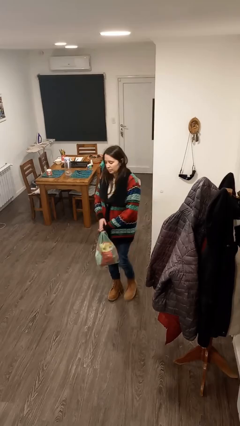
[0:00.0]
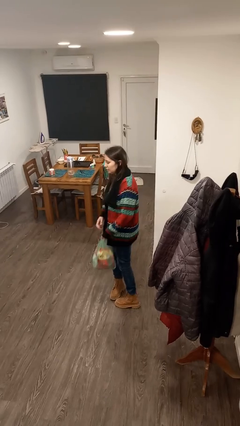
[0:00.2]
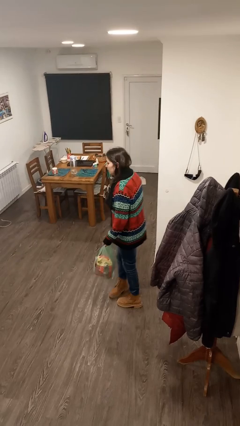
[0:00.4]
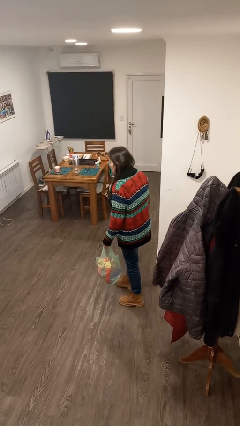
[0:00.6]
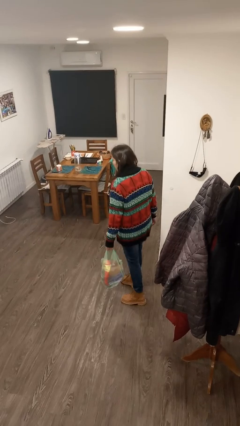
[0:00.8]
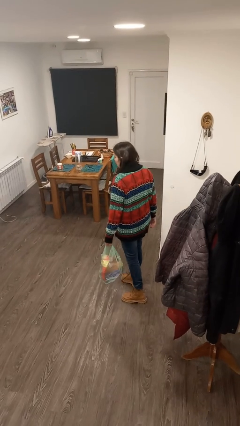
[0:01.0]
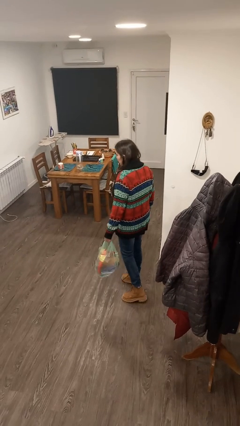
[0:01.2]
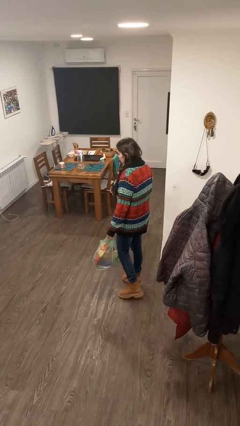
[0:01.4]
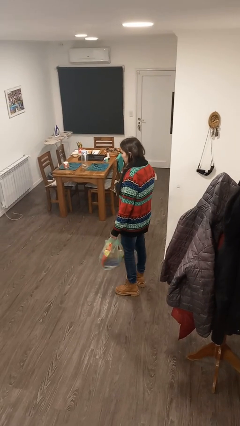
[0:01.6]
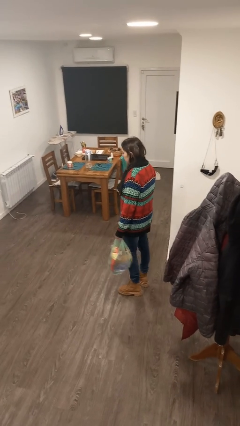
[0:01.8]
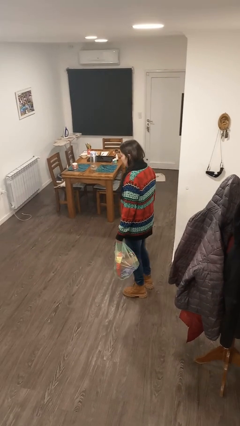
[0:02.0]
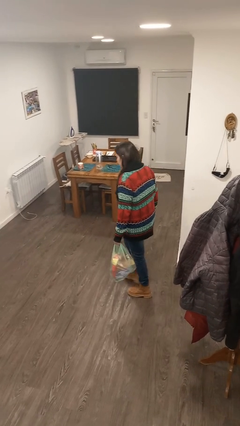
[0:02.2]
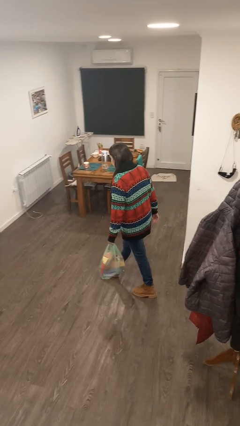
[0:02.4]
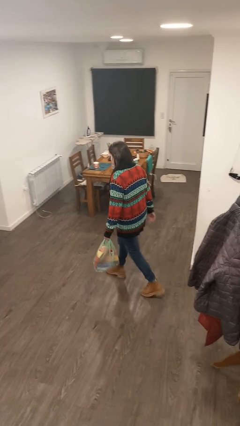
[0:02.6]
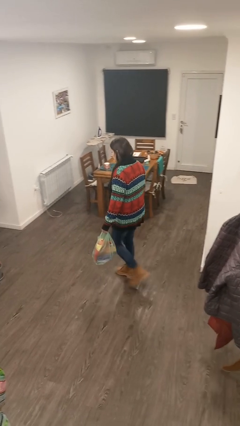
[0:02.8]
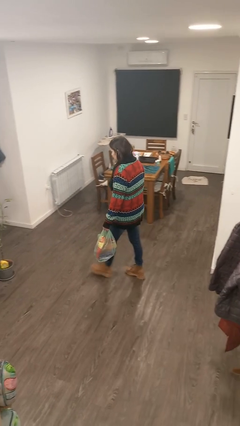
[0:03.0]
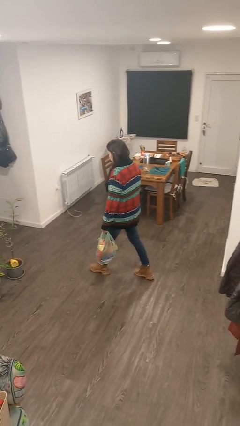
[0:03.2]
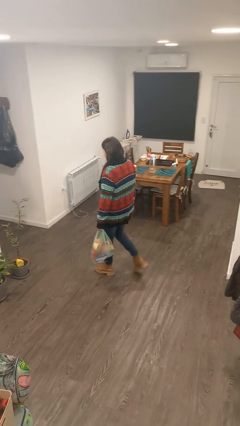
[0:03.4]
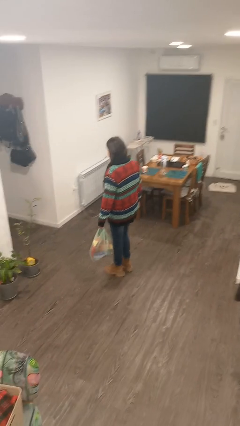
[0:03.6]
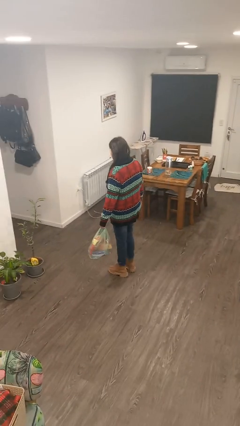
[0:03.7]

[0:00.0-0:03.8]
person carries groceries

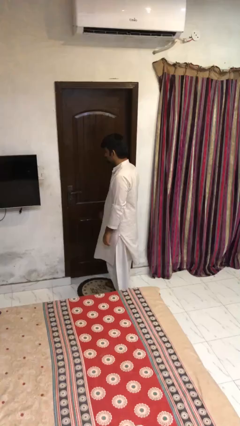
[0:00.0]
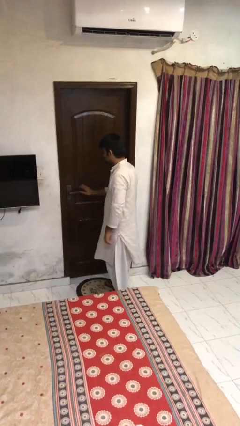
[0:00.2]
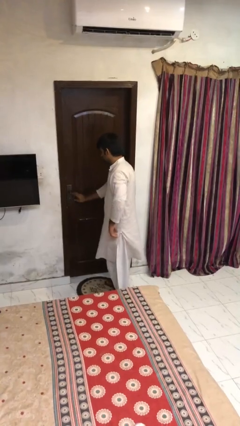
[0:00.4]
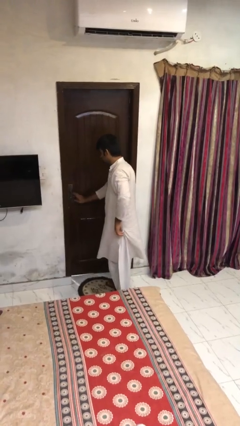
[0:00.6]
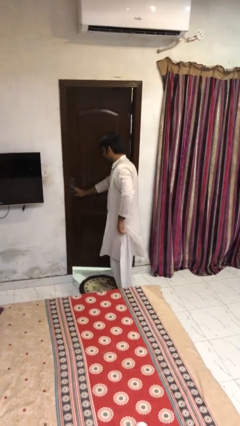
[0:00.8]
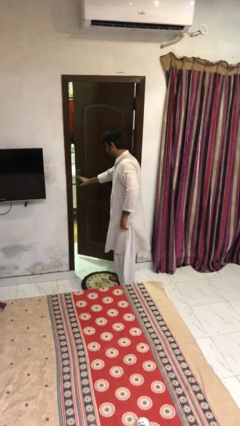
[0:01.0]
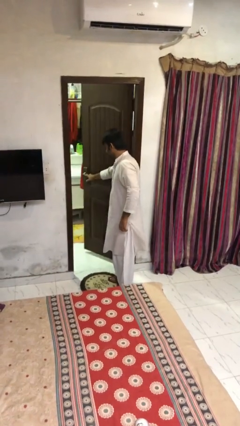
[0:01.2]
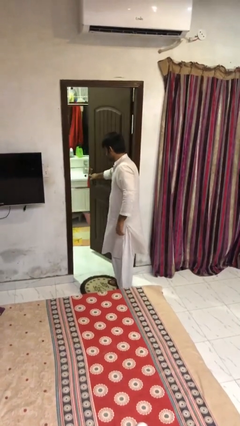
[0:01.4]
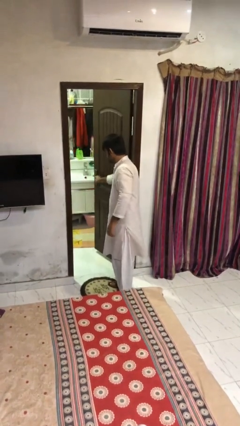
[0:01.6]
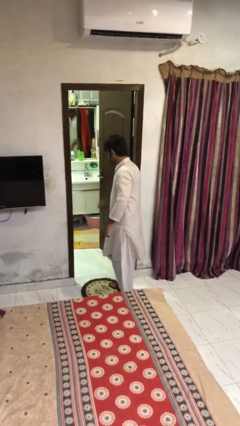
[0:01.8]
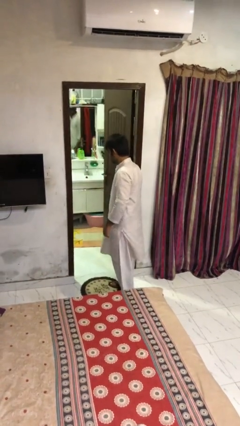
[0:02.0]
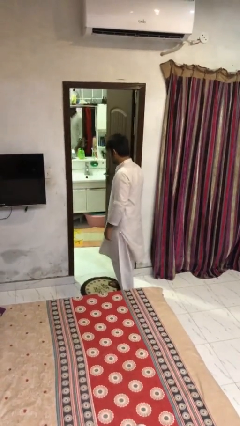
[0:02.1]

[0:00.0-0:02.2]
person opens facility door

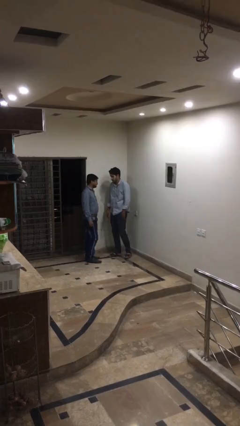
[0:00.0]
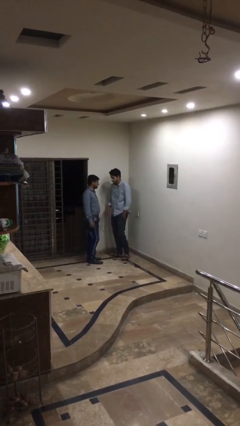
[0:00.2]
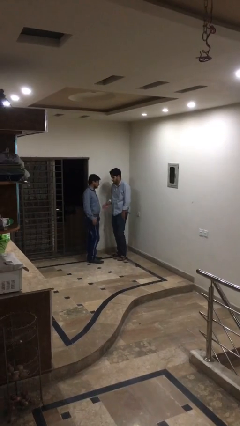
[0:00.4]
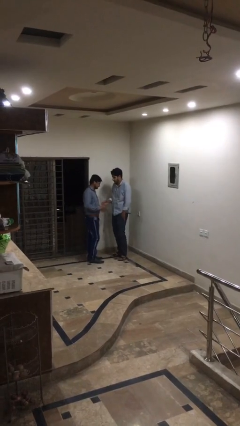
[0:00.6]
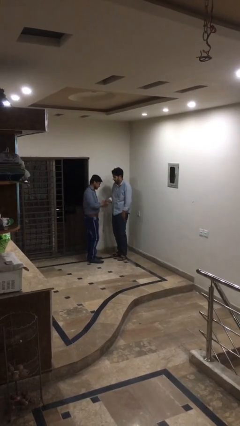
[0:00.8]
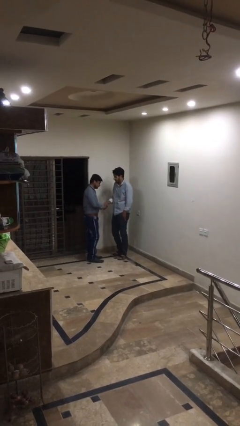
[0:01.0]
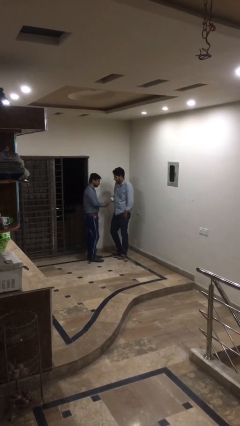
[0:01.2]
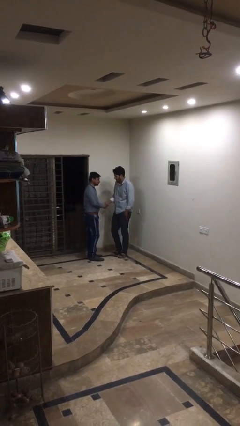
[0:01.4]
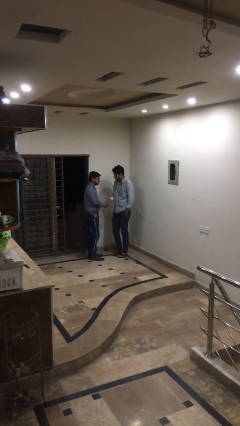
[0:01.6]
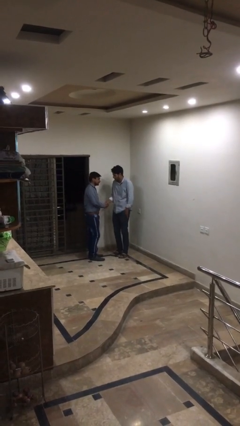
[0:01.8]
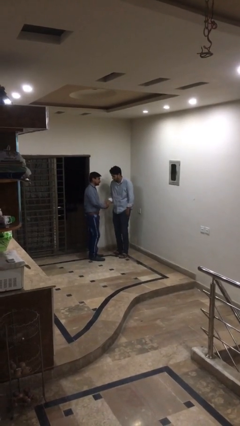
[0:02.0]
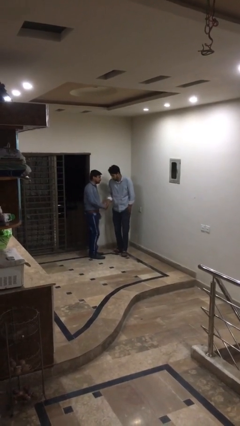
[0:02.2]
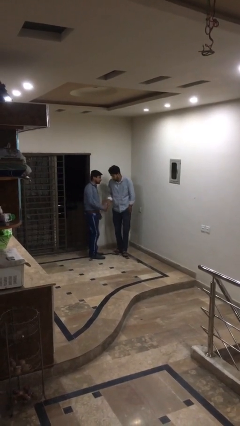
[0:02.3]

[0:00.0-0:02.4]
person shakes hand

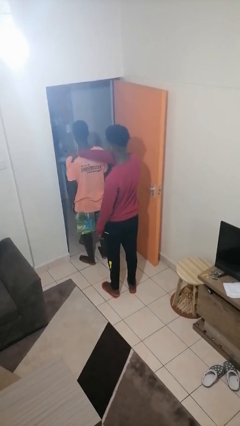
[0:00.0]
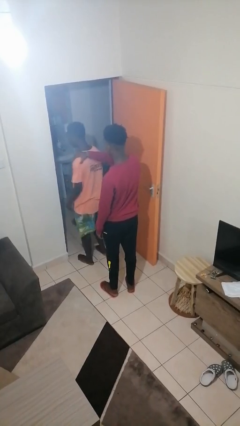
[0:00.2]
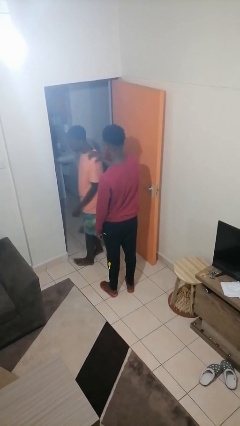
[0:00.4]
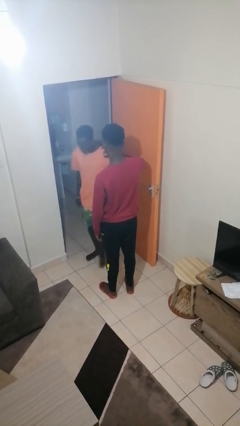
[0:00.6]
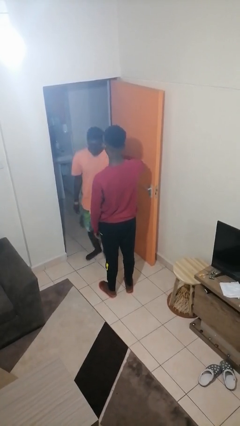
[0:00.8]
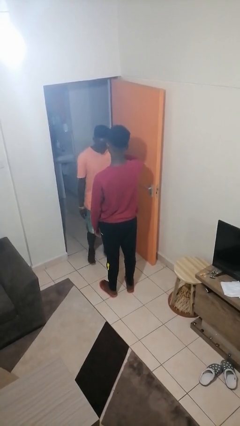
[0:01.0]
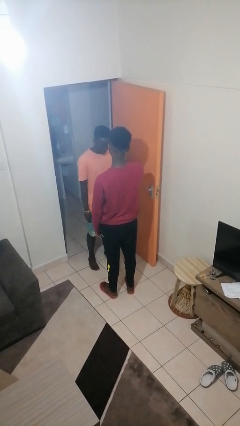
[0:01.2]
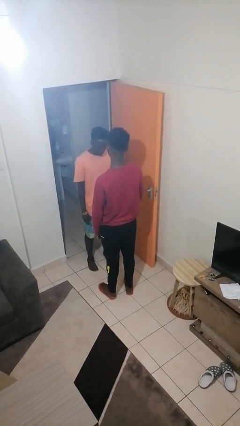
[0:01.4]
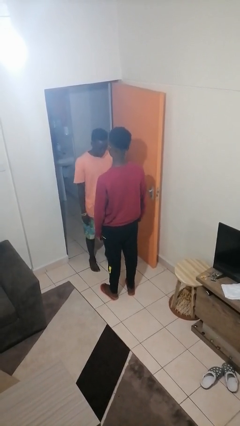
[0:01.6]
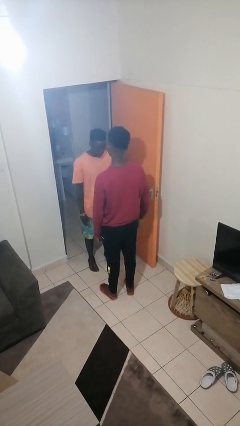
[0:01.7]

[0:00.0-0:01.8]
person spins person around

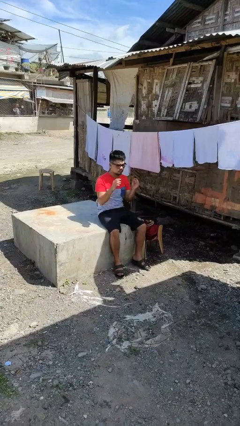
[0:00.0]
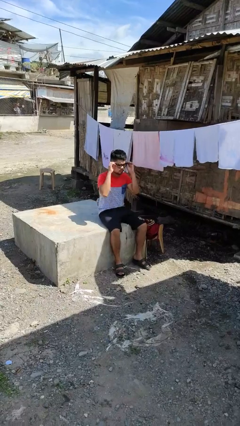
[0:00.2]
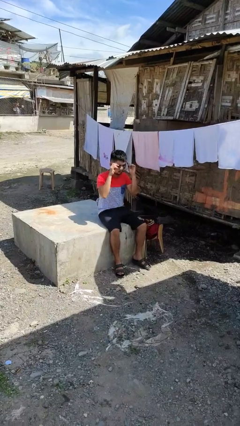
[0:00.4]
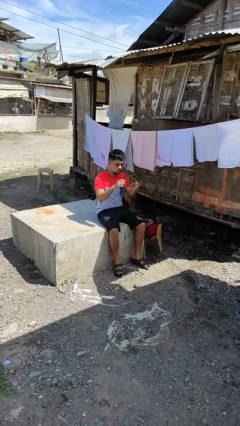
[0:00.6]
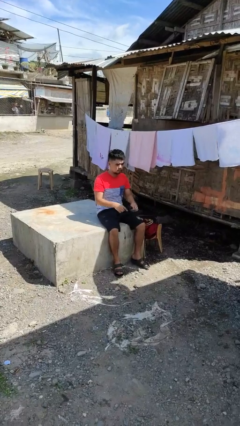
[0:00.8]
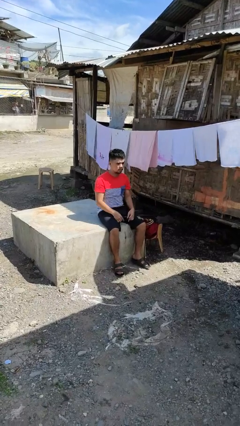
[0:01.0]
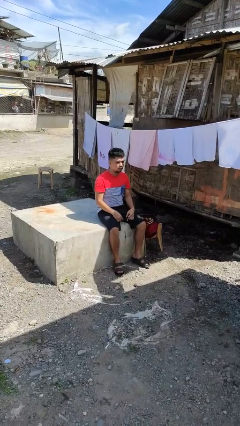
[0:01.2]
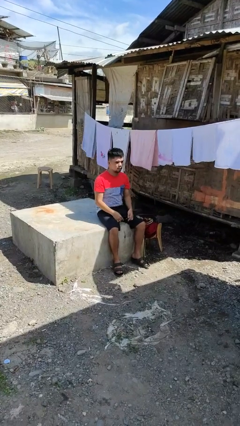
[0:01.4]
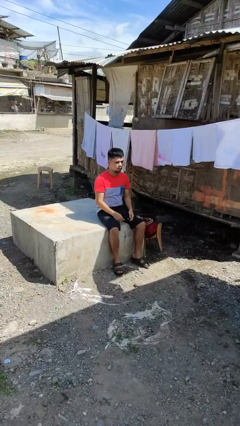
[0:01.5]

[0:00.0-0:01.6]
person takes off glasses

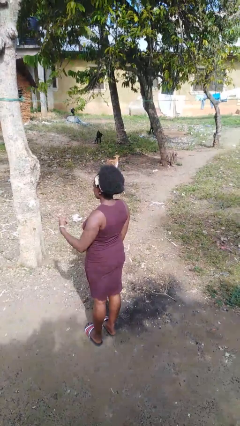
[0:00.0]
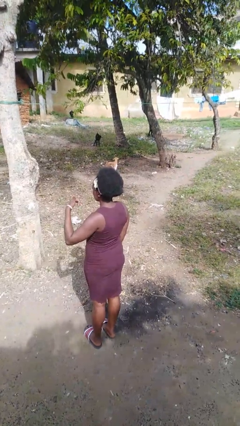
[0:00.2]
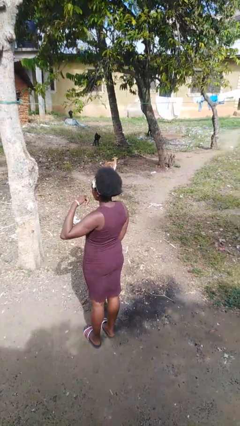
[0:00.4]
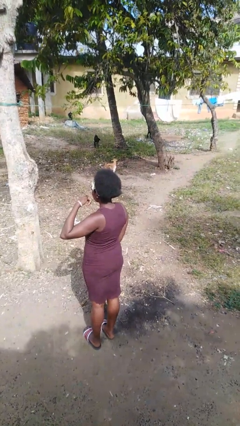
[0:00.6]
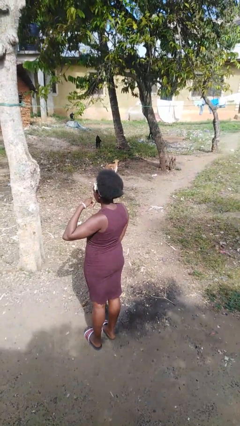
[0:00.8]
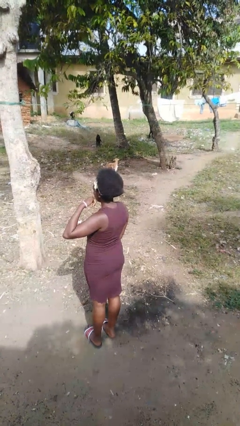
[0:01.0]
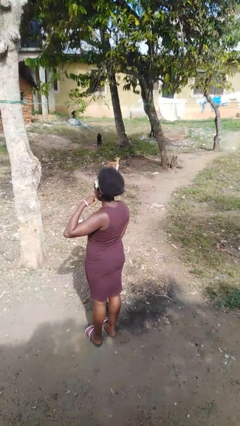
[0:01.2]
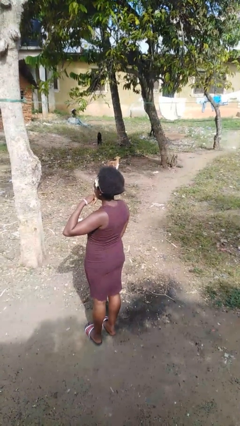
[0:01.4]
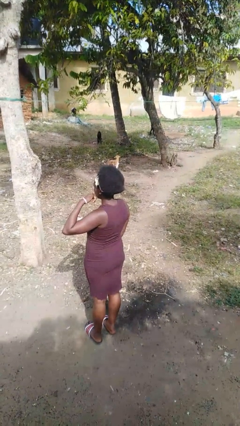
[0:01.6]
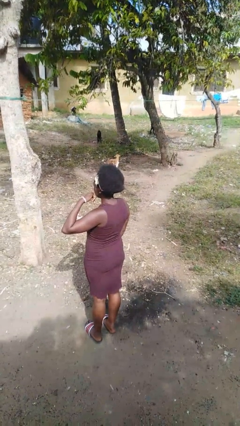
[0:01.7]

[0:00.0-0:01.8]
person gestures call me

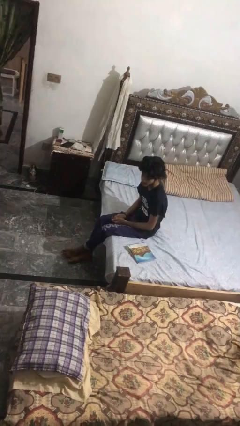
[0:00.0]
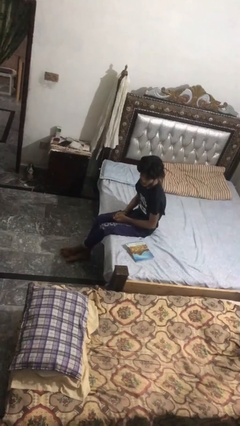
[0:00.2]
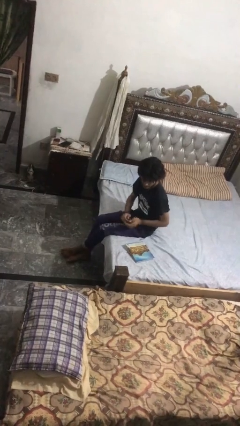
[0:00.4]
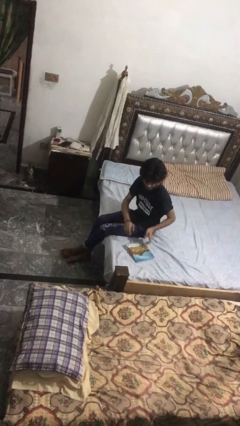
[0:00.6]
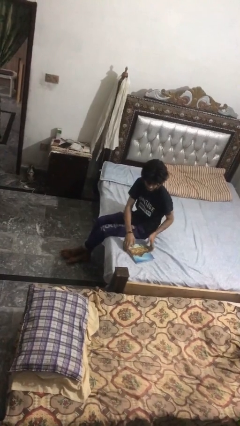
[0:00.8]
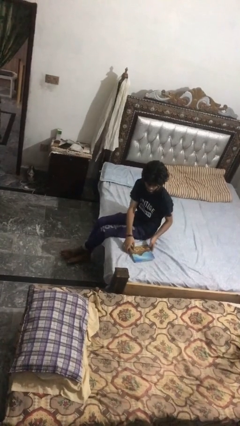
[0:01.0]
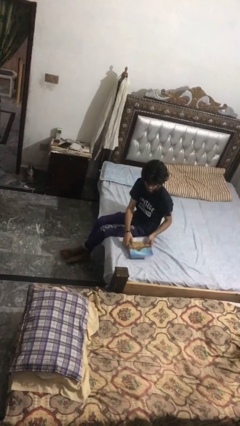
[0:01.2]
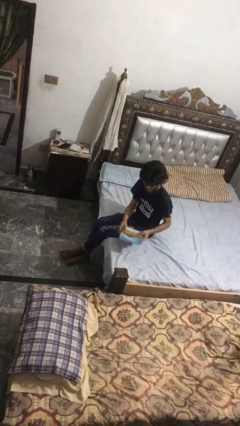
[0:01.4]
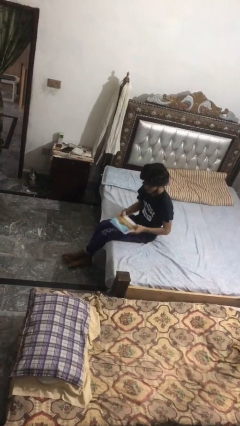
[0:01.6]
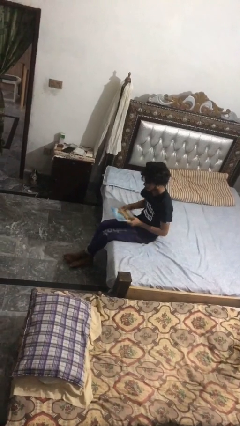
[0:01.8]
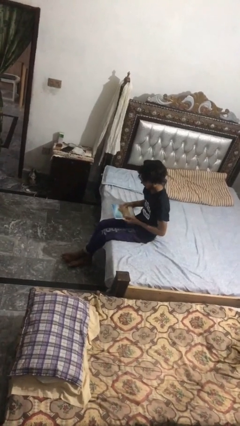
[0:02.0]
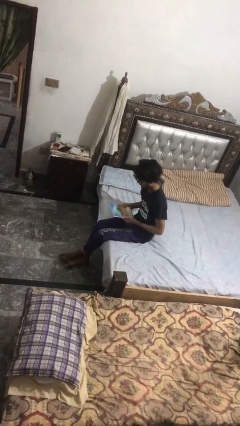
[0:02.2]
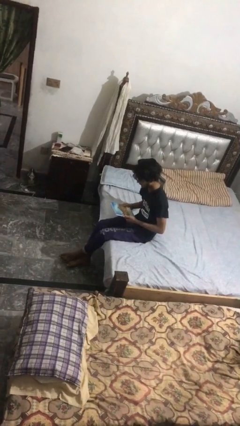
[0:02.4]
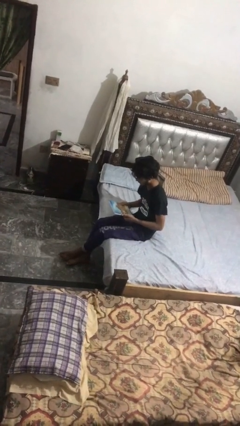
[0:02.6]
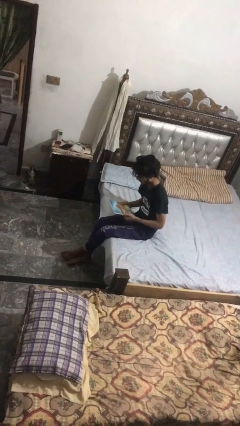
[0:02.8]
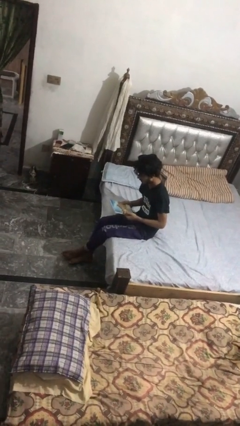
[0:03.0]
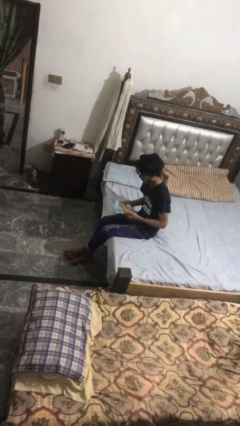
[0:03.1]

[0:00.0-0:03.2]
person picks up object from bed
